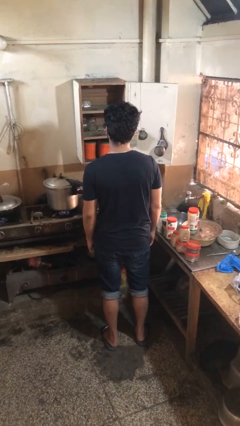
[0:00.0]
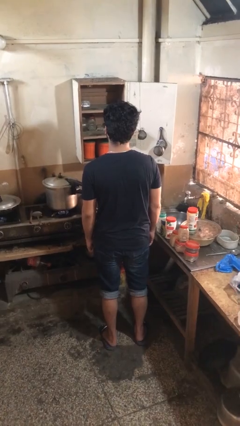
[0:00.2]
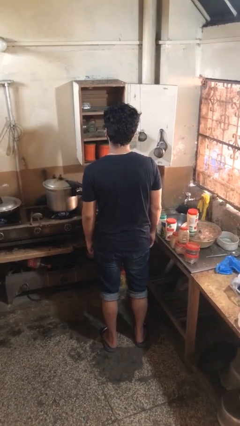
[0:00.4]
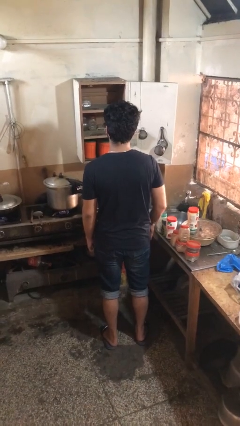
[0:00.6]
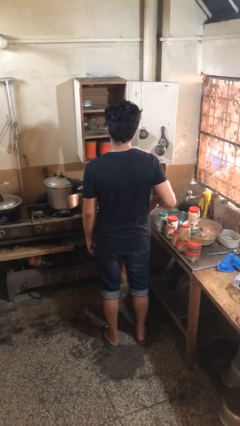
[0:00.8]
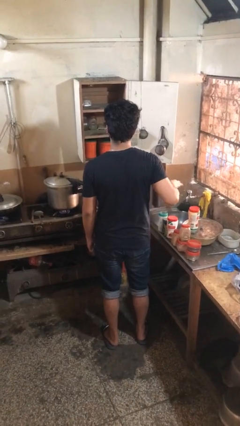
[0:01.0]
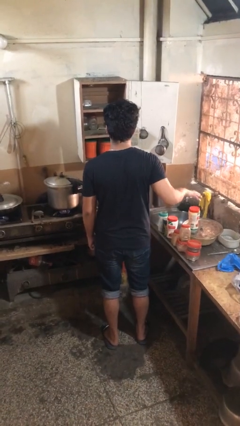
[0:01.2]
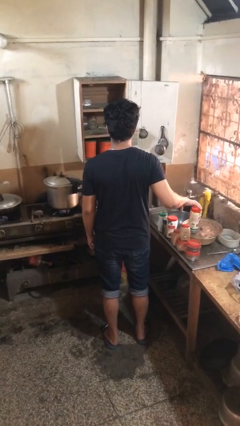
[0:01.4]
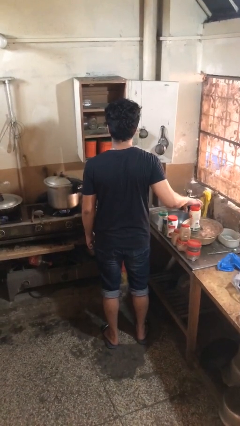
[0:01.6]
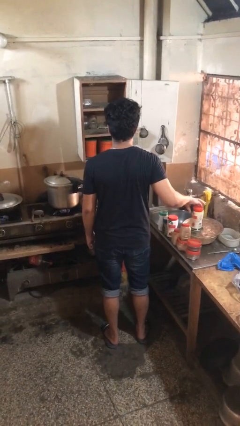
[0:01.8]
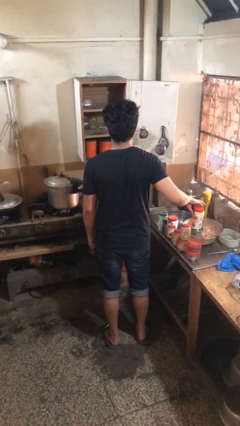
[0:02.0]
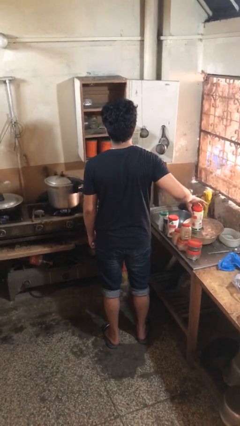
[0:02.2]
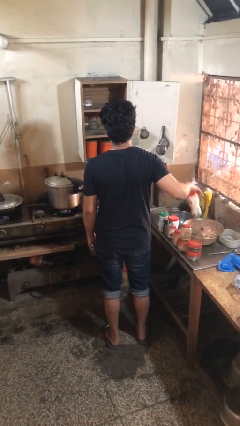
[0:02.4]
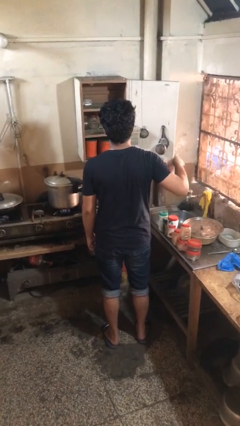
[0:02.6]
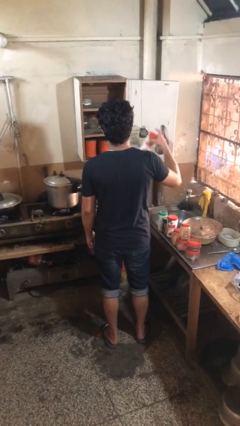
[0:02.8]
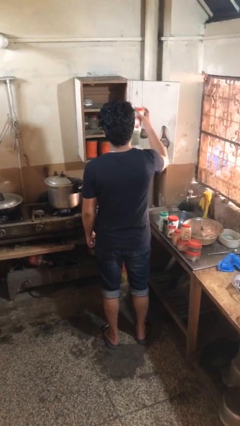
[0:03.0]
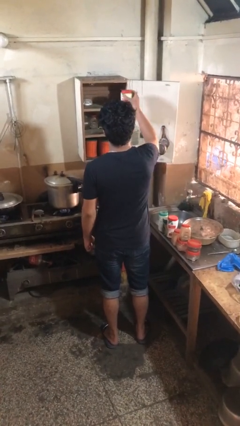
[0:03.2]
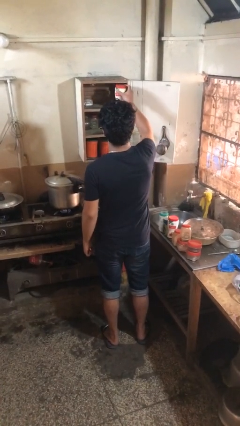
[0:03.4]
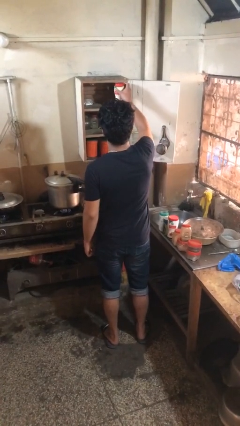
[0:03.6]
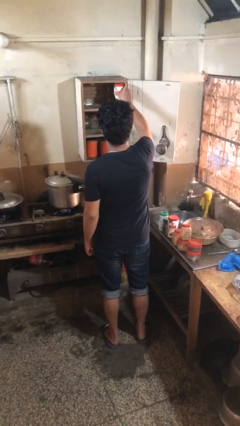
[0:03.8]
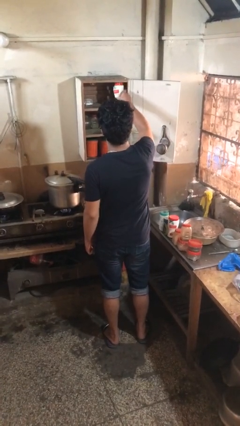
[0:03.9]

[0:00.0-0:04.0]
person loads groceries into cabinet

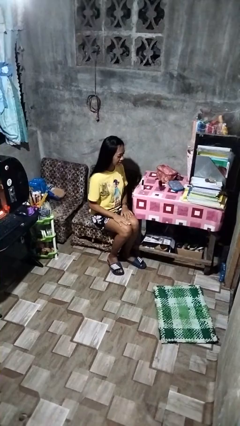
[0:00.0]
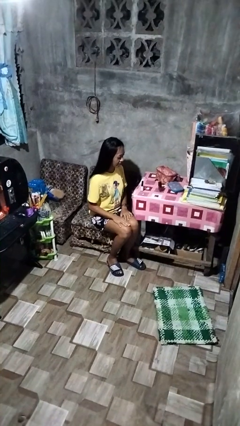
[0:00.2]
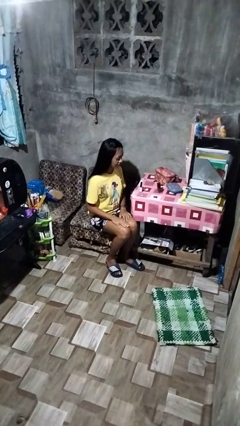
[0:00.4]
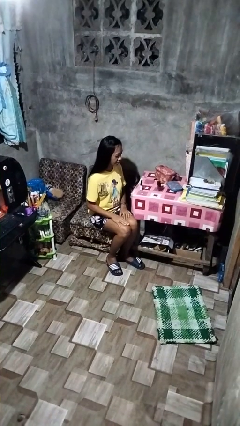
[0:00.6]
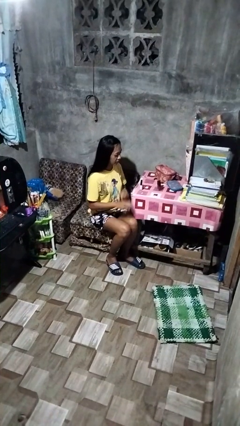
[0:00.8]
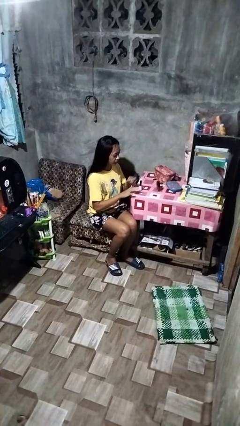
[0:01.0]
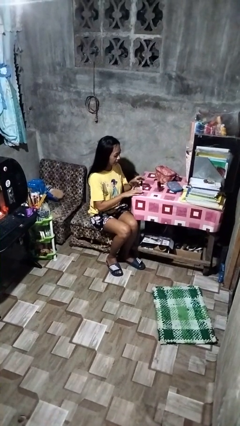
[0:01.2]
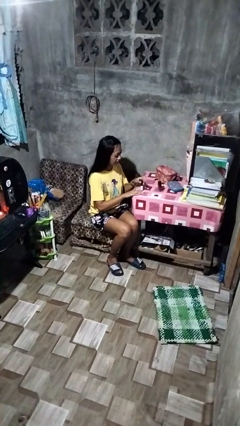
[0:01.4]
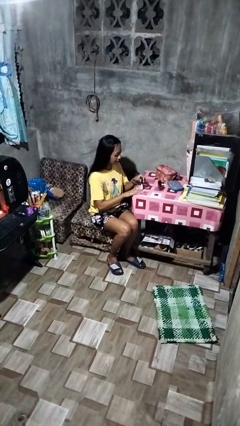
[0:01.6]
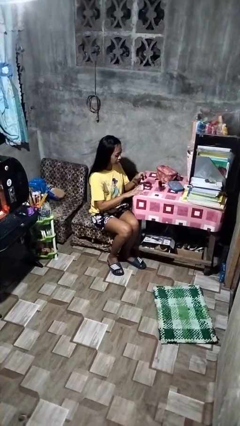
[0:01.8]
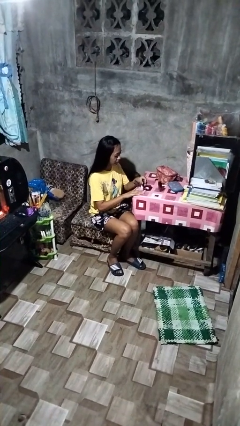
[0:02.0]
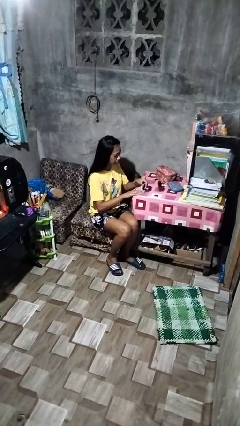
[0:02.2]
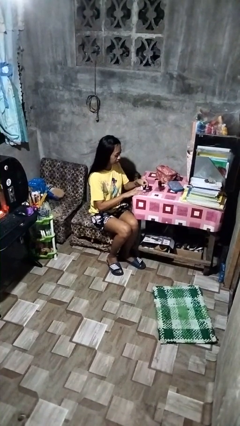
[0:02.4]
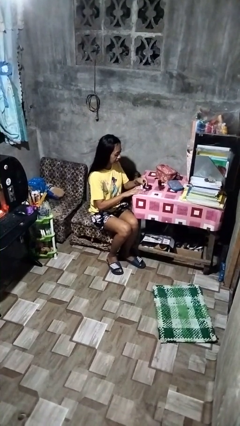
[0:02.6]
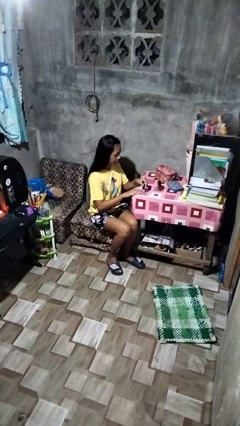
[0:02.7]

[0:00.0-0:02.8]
person paints fingernails

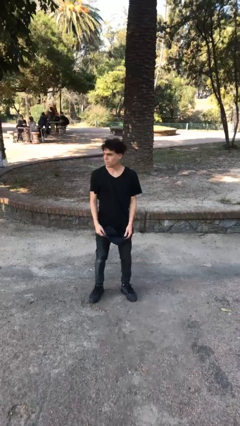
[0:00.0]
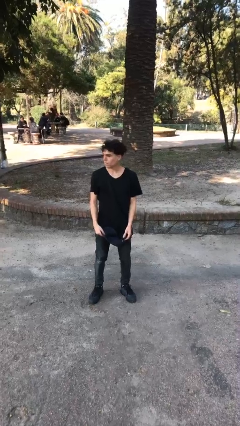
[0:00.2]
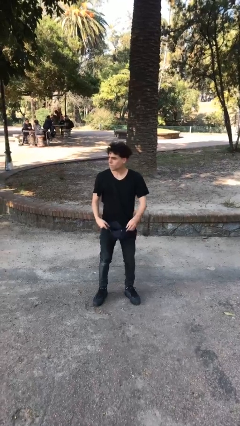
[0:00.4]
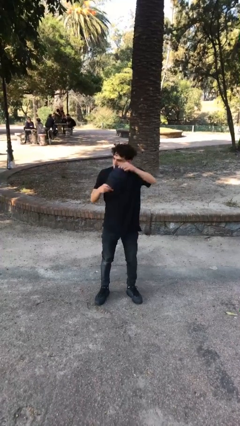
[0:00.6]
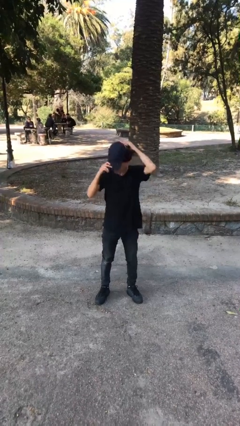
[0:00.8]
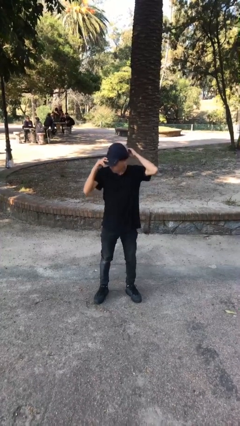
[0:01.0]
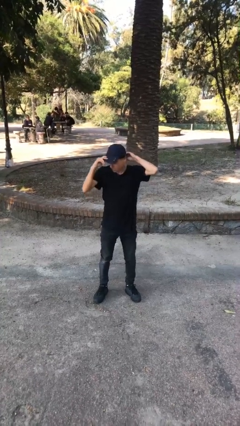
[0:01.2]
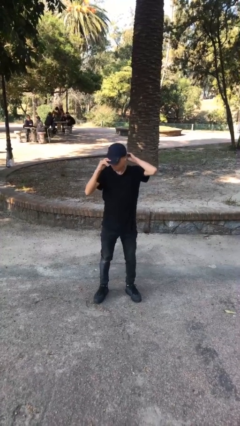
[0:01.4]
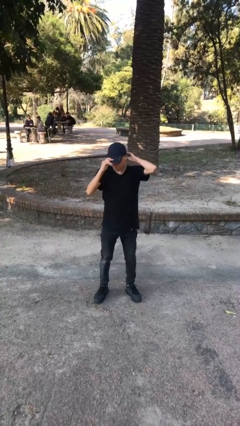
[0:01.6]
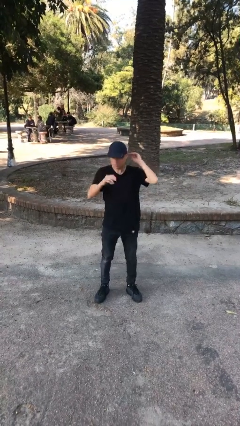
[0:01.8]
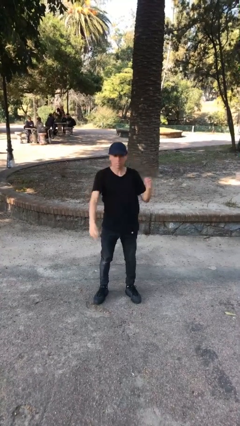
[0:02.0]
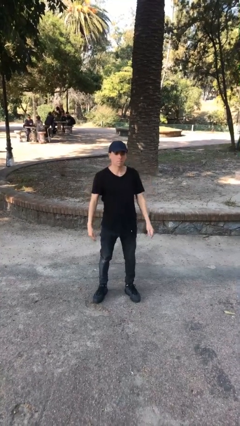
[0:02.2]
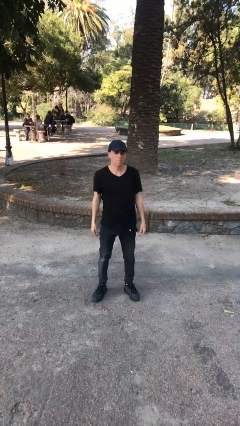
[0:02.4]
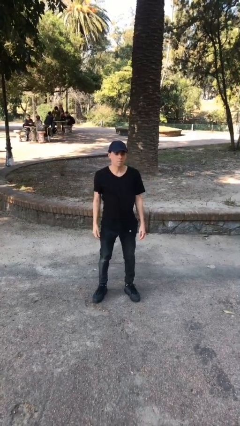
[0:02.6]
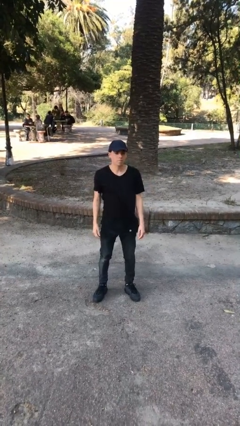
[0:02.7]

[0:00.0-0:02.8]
person puts on hat

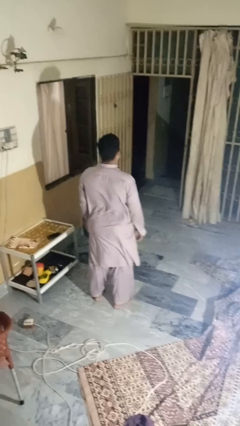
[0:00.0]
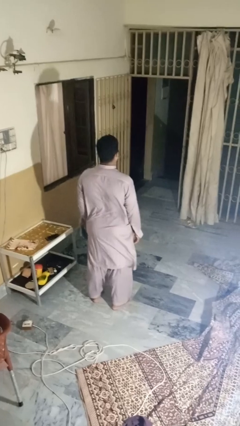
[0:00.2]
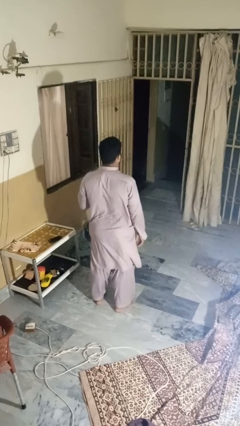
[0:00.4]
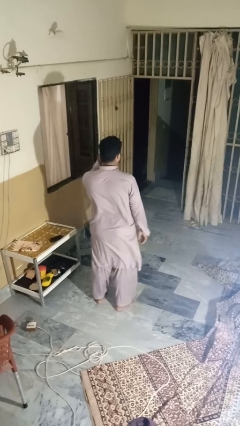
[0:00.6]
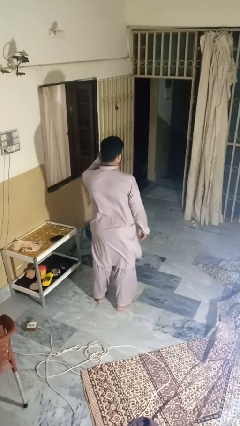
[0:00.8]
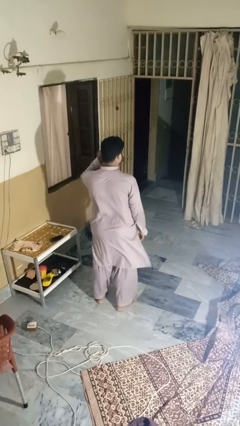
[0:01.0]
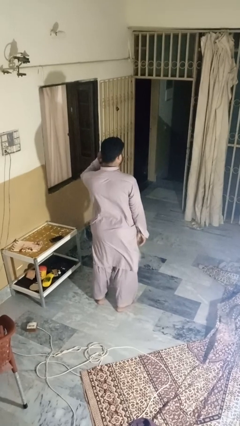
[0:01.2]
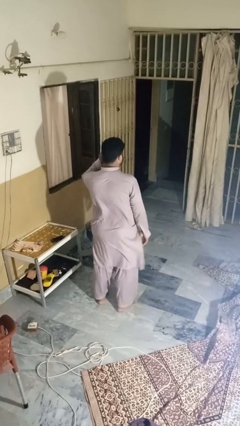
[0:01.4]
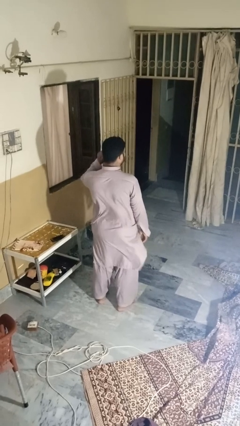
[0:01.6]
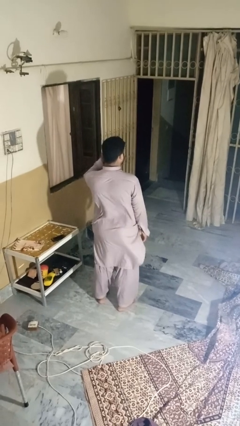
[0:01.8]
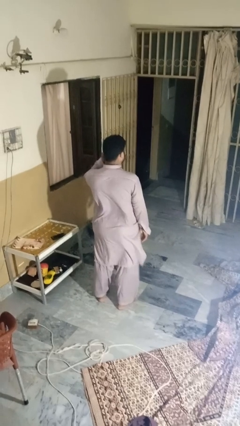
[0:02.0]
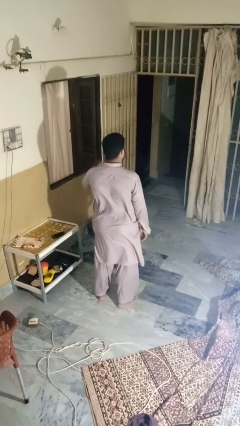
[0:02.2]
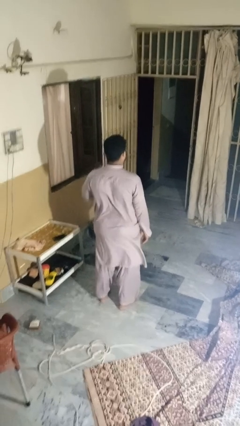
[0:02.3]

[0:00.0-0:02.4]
person touches earlobe

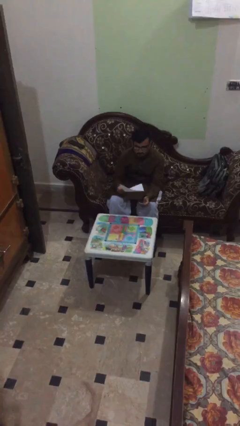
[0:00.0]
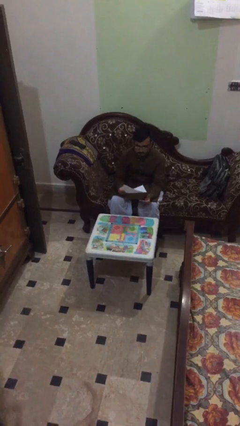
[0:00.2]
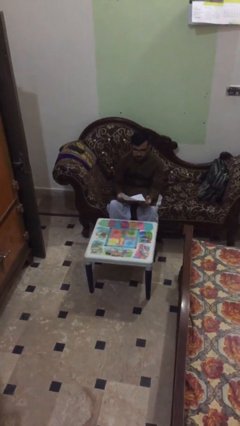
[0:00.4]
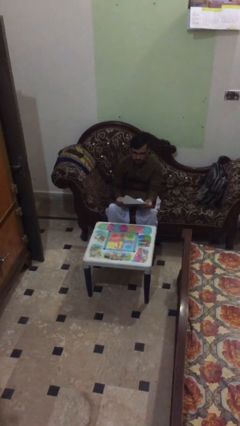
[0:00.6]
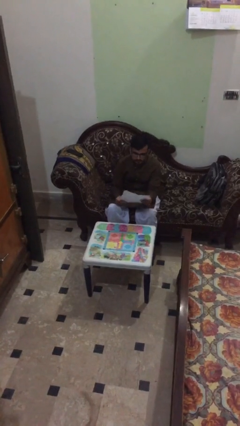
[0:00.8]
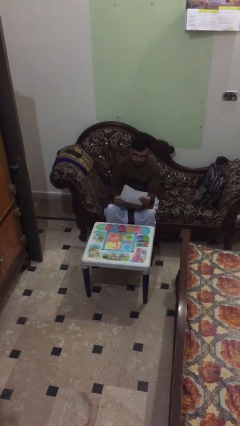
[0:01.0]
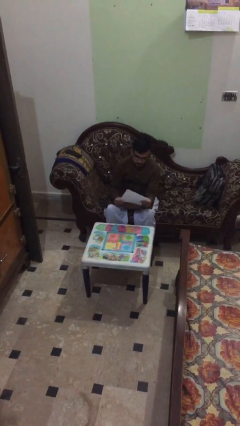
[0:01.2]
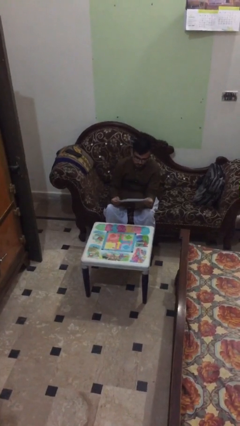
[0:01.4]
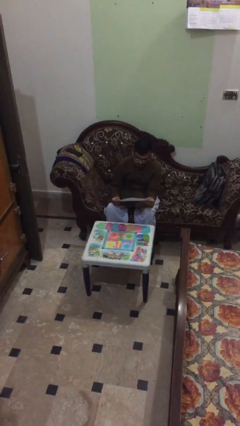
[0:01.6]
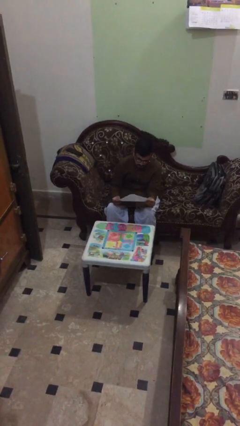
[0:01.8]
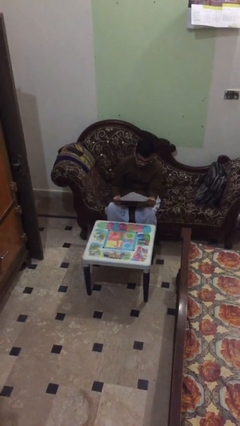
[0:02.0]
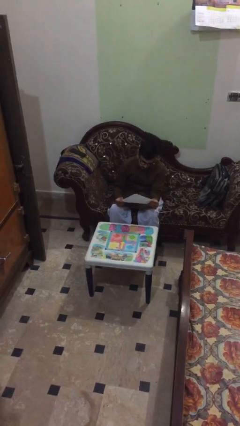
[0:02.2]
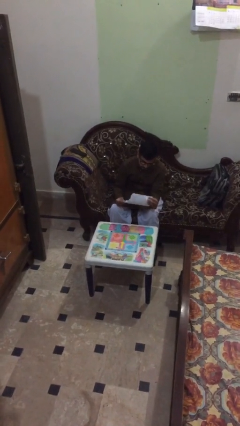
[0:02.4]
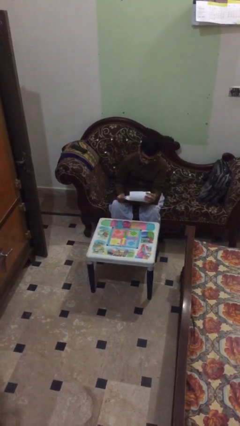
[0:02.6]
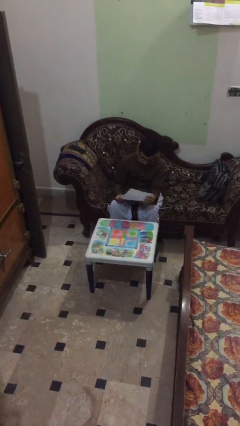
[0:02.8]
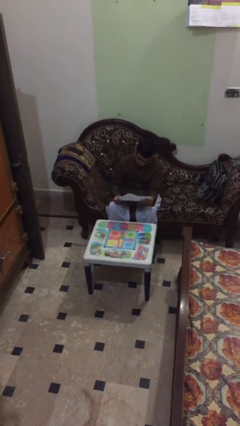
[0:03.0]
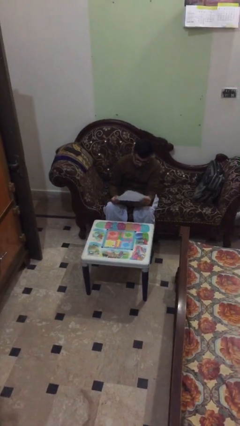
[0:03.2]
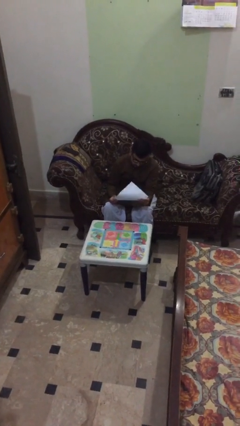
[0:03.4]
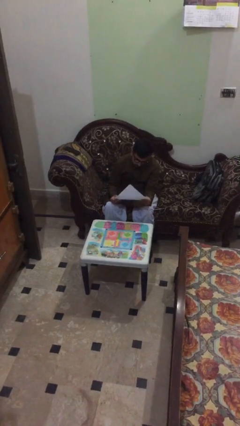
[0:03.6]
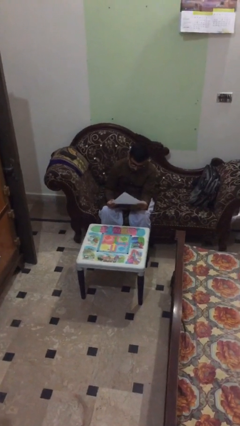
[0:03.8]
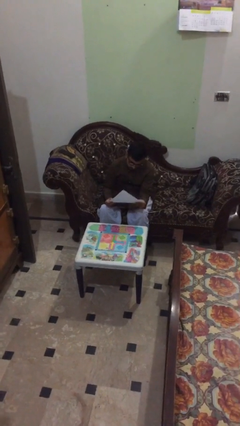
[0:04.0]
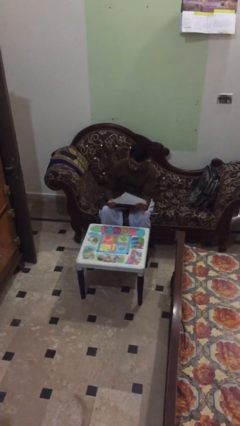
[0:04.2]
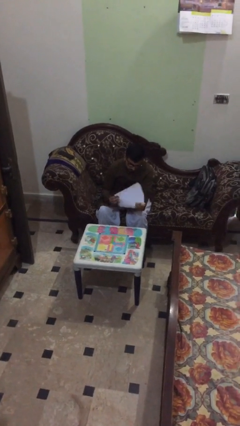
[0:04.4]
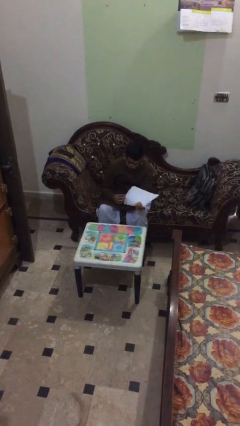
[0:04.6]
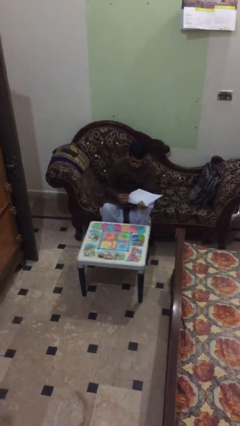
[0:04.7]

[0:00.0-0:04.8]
person reads document

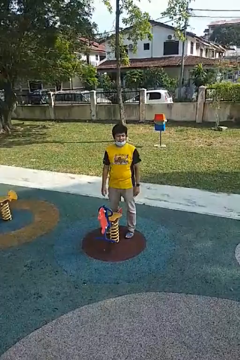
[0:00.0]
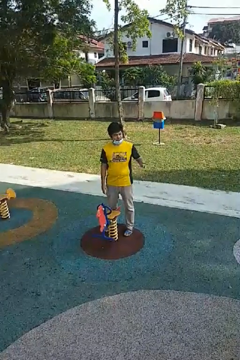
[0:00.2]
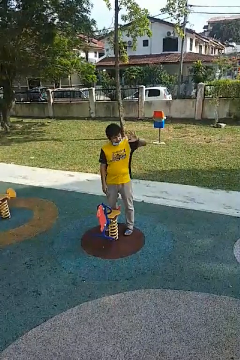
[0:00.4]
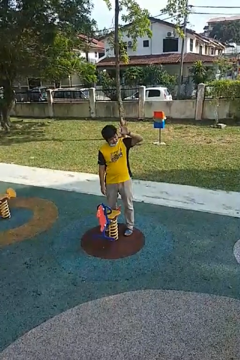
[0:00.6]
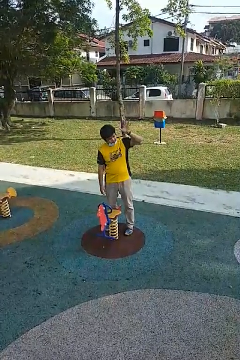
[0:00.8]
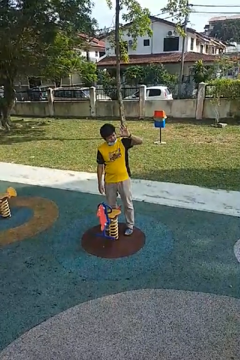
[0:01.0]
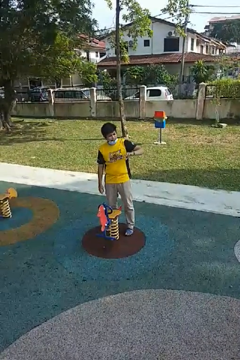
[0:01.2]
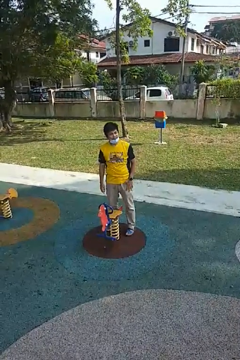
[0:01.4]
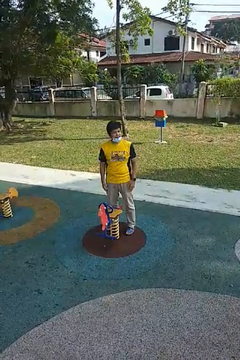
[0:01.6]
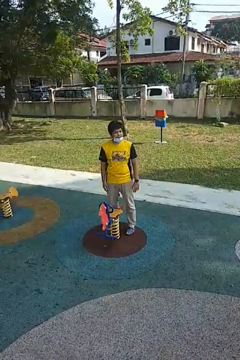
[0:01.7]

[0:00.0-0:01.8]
person waves at person
